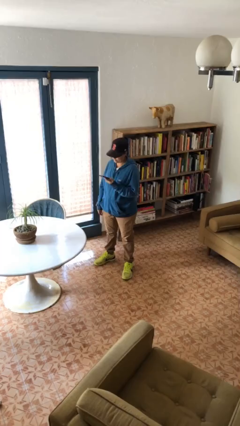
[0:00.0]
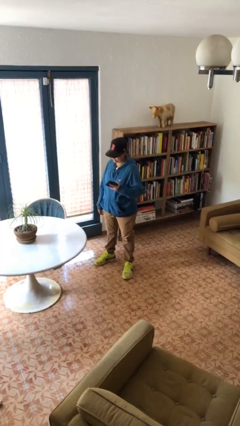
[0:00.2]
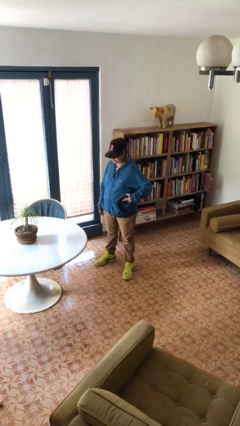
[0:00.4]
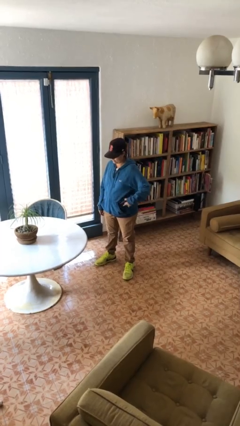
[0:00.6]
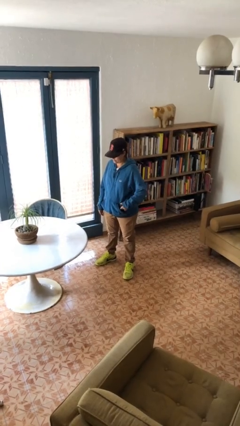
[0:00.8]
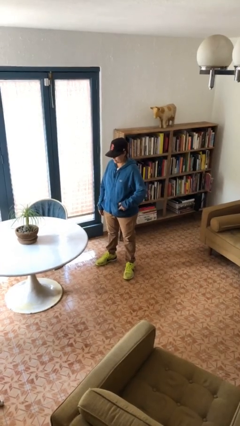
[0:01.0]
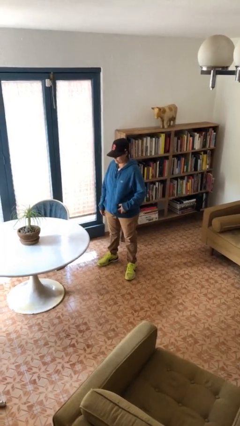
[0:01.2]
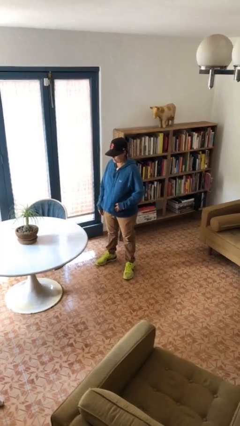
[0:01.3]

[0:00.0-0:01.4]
person puts phone into pocket

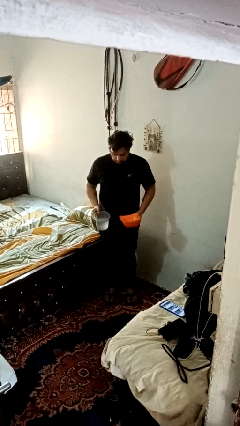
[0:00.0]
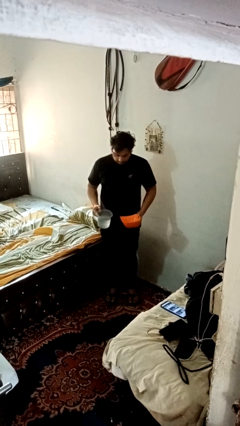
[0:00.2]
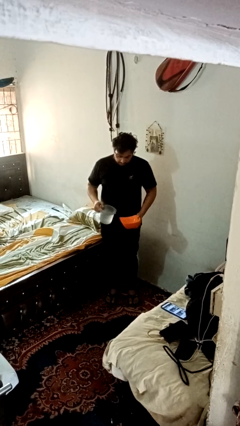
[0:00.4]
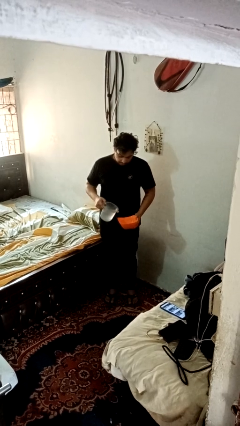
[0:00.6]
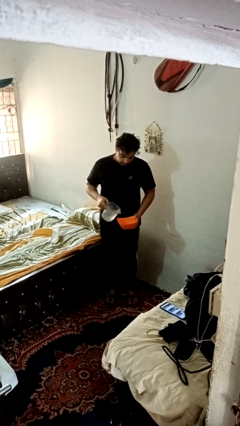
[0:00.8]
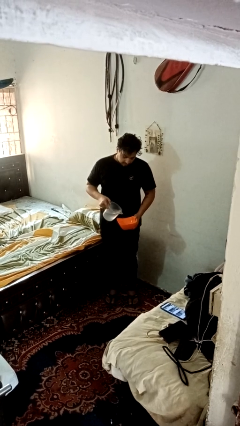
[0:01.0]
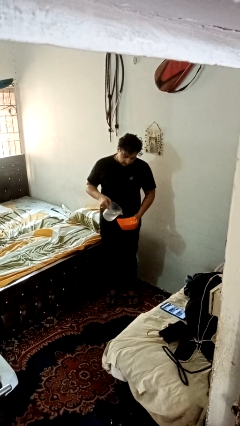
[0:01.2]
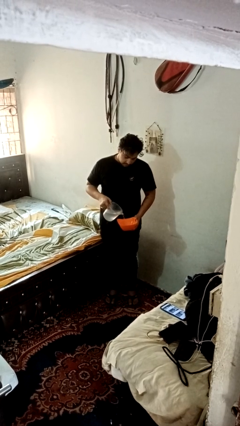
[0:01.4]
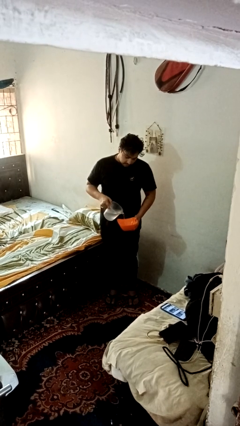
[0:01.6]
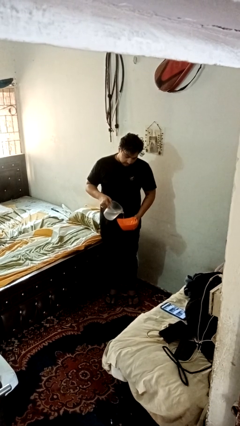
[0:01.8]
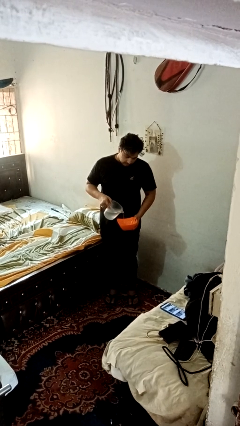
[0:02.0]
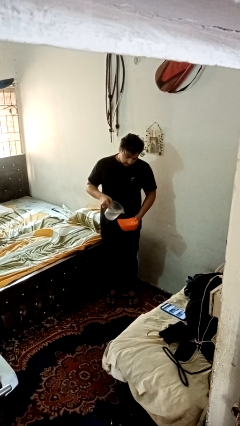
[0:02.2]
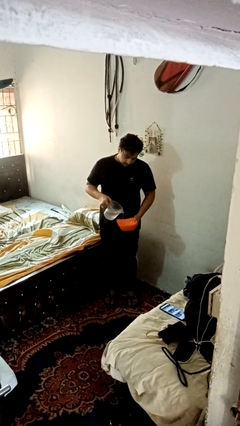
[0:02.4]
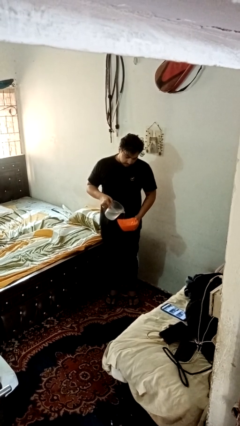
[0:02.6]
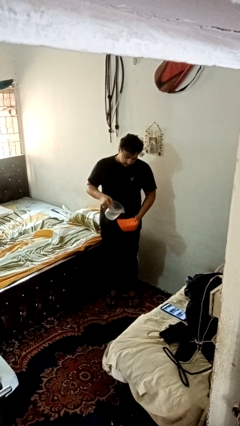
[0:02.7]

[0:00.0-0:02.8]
person pours into bowl

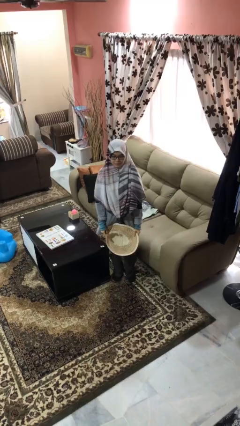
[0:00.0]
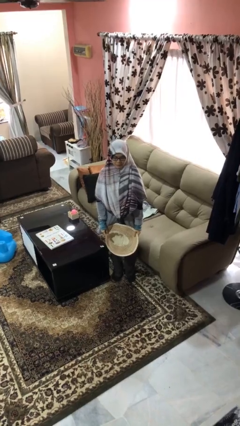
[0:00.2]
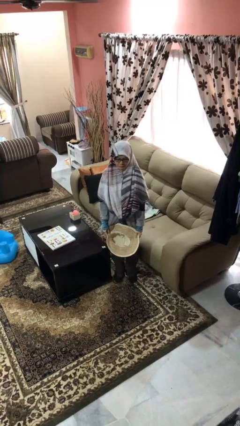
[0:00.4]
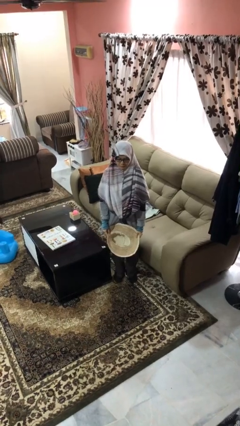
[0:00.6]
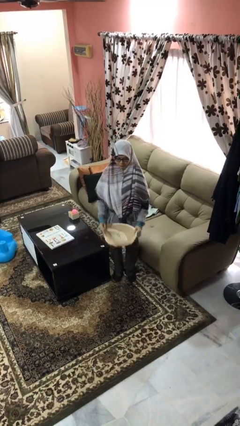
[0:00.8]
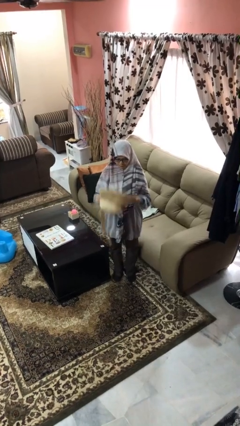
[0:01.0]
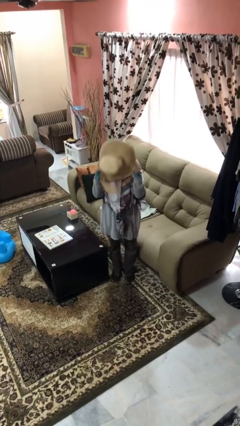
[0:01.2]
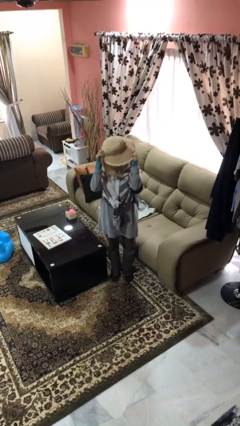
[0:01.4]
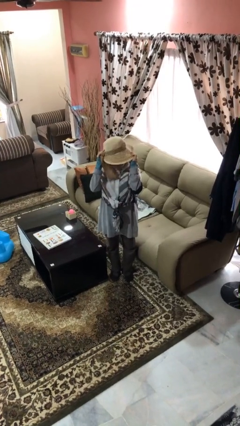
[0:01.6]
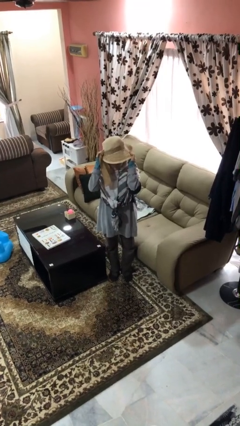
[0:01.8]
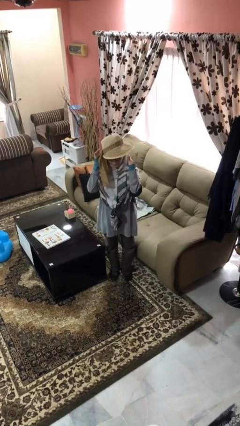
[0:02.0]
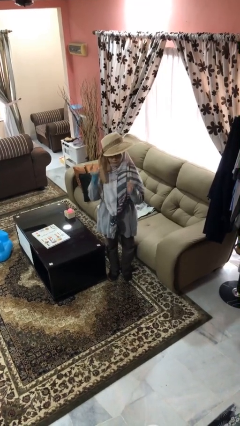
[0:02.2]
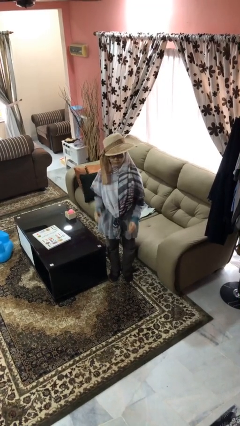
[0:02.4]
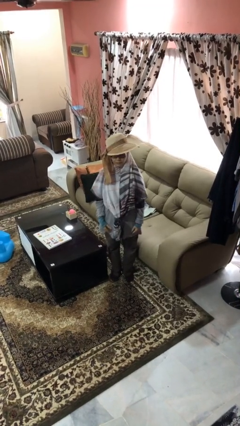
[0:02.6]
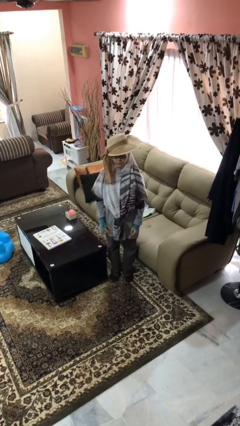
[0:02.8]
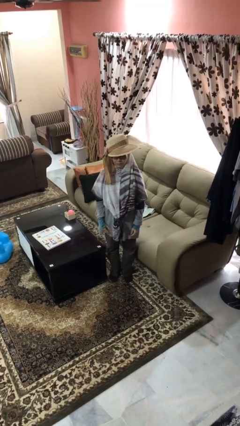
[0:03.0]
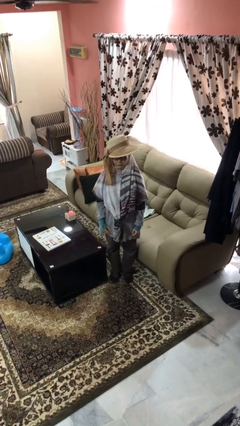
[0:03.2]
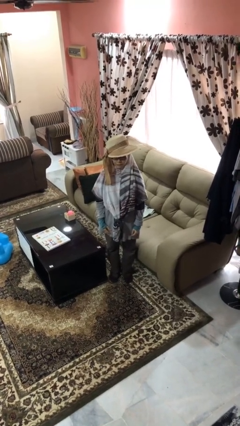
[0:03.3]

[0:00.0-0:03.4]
person puts on hat

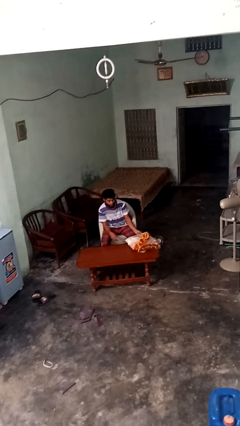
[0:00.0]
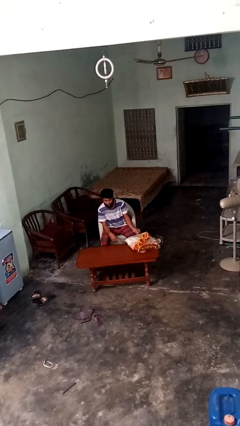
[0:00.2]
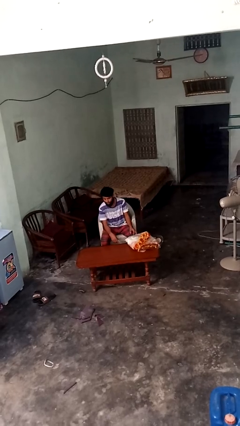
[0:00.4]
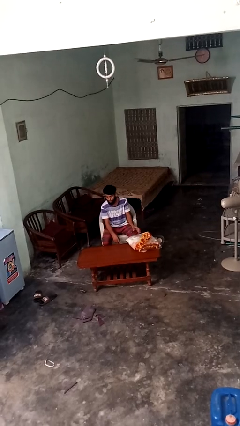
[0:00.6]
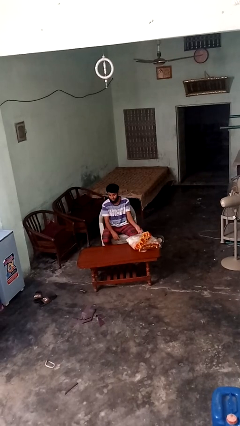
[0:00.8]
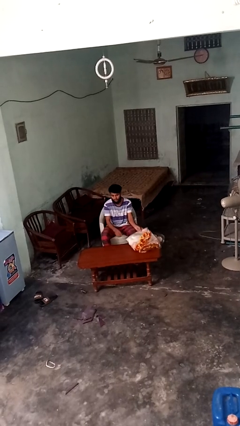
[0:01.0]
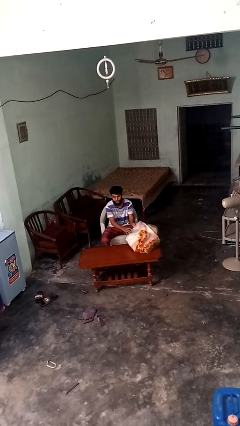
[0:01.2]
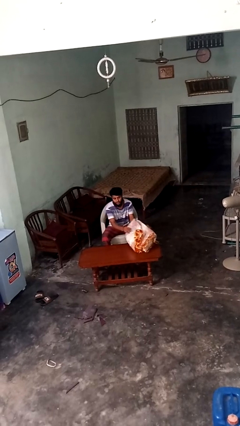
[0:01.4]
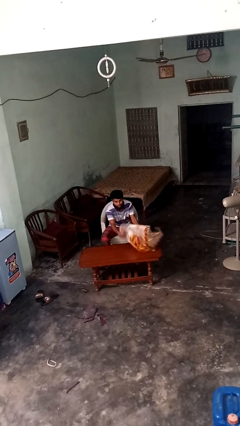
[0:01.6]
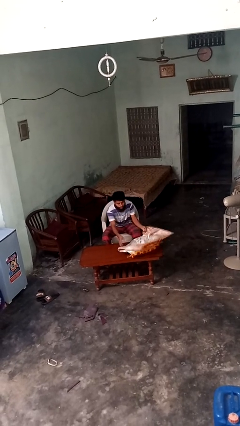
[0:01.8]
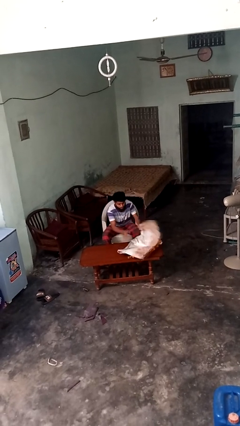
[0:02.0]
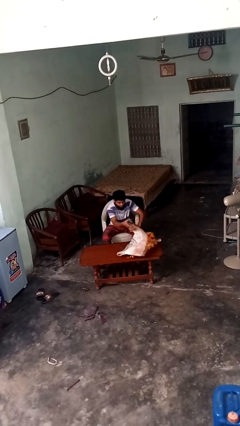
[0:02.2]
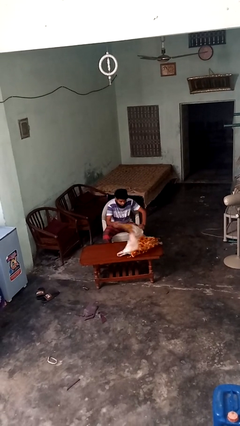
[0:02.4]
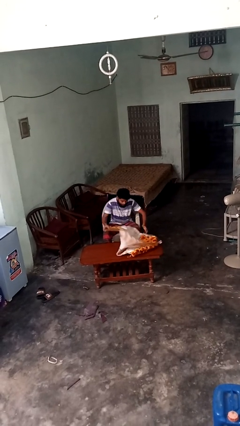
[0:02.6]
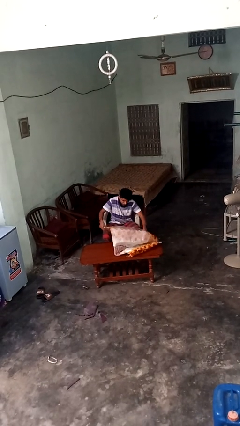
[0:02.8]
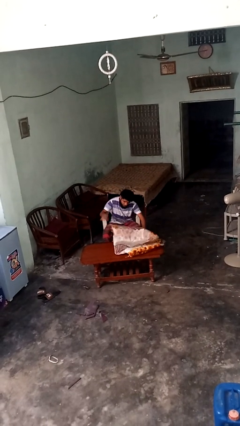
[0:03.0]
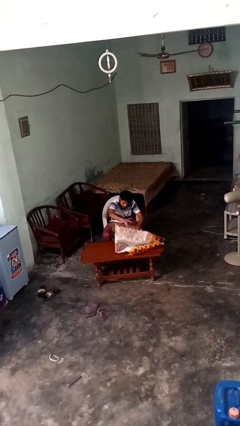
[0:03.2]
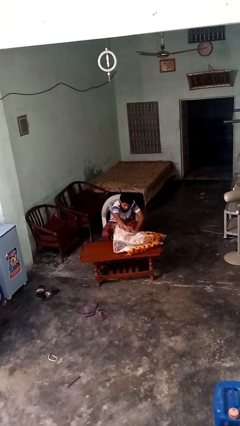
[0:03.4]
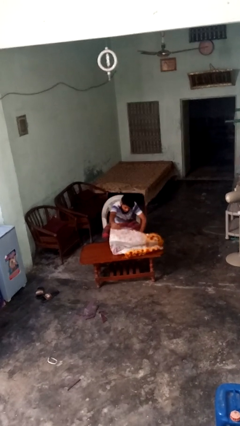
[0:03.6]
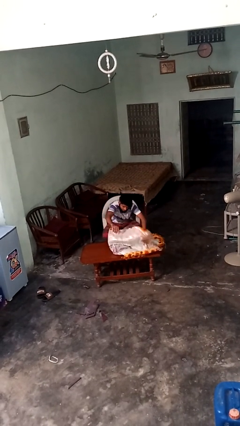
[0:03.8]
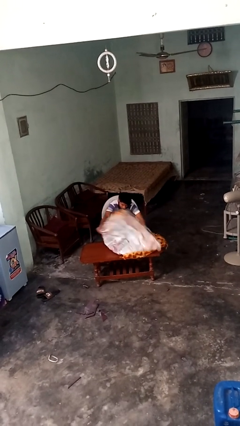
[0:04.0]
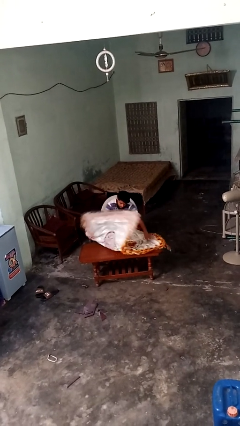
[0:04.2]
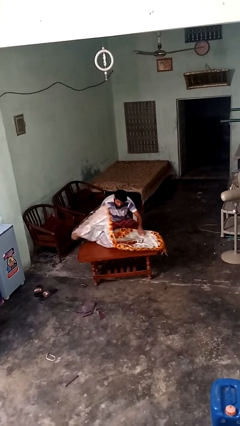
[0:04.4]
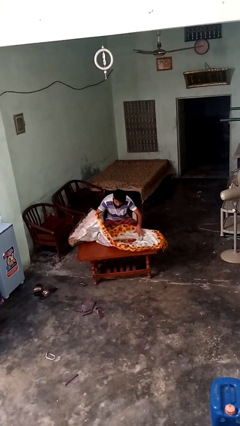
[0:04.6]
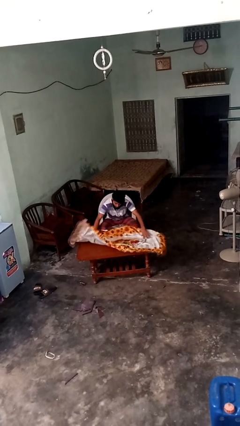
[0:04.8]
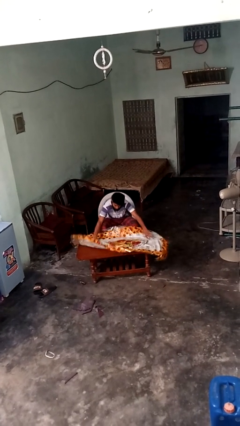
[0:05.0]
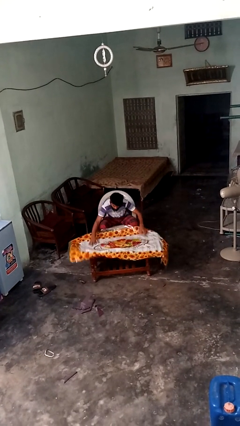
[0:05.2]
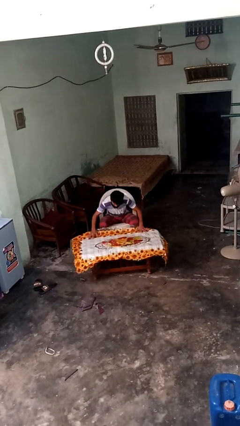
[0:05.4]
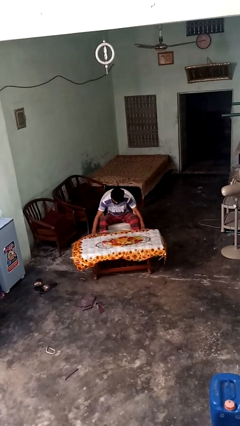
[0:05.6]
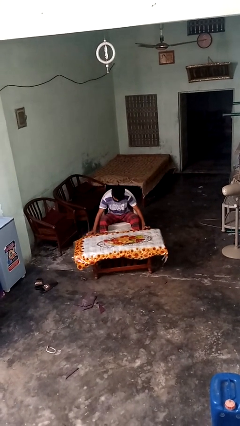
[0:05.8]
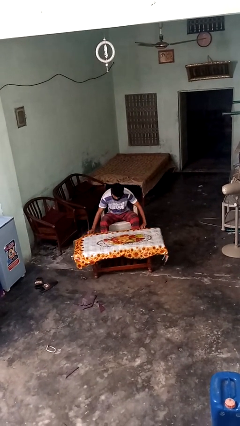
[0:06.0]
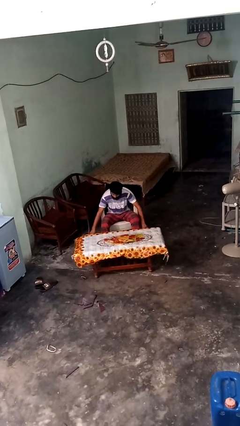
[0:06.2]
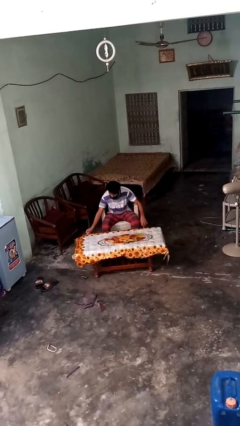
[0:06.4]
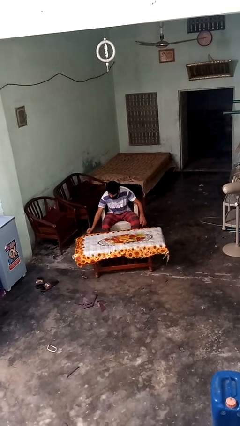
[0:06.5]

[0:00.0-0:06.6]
person spreads tablecloth

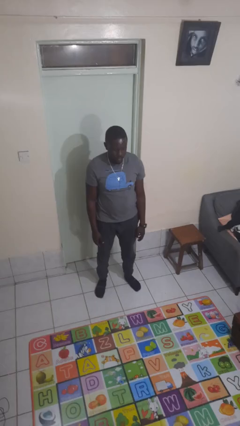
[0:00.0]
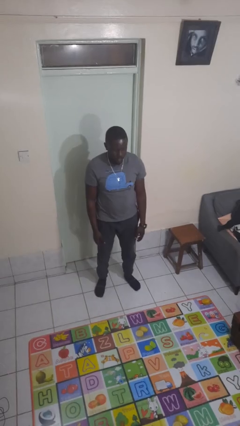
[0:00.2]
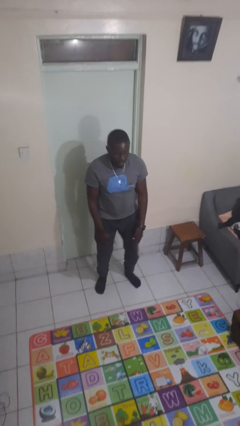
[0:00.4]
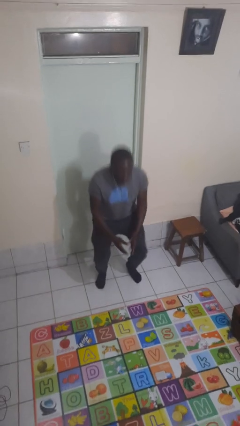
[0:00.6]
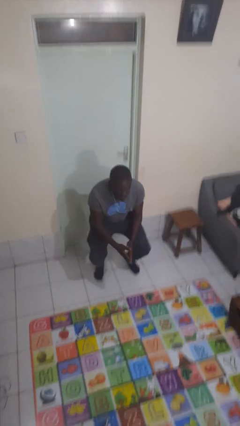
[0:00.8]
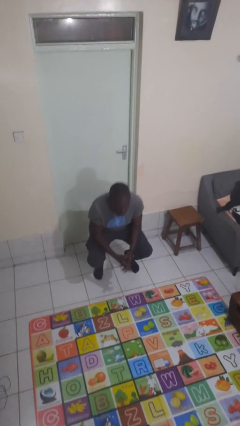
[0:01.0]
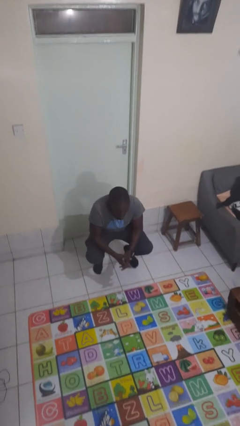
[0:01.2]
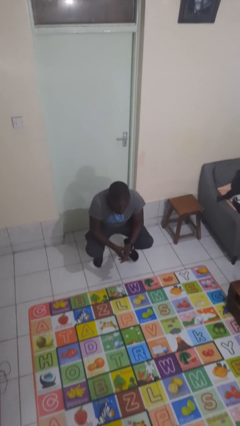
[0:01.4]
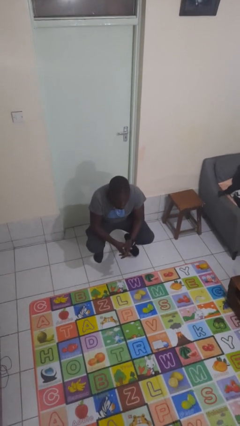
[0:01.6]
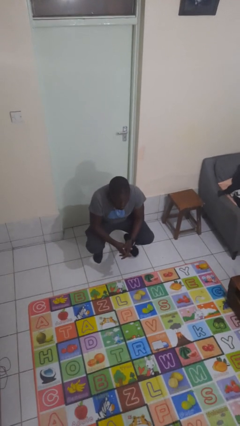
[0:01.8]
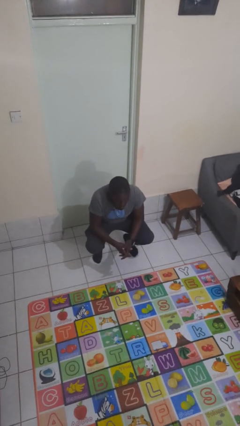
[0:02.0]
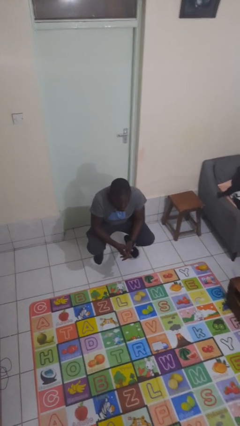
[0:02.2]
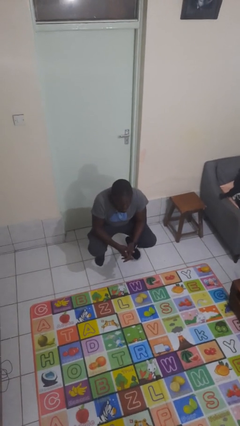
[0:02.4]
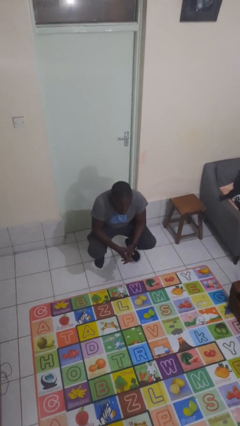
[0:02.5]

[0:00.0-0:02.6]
person squats

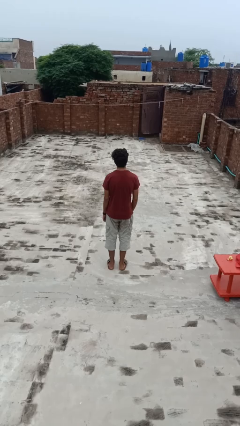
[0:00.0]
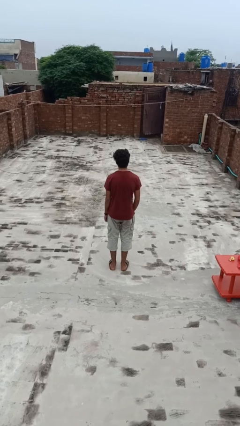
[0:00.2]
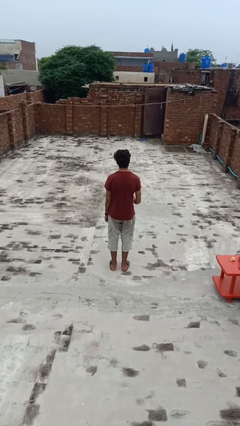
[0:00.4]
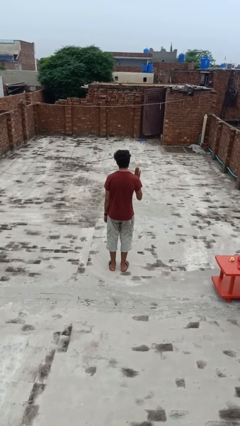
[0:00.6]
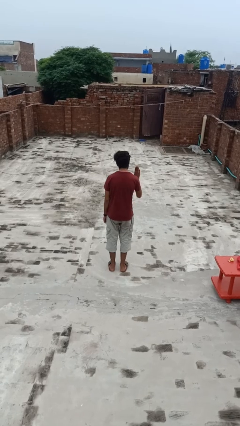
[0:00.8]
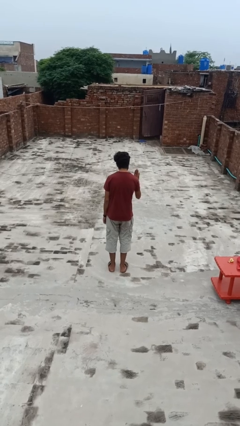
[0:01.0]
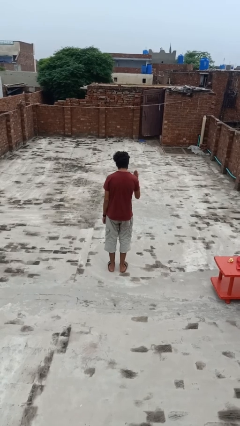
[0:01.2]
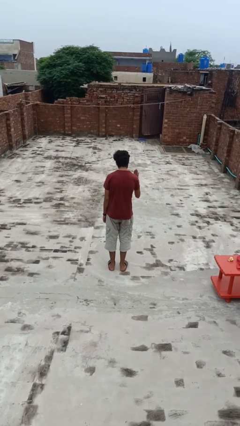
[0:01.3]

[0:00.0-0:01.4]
person gestures stop
